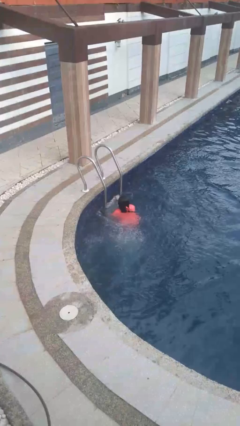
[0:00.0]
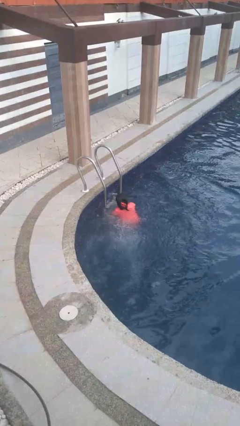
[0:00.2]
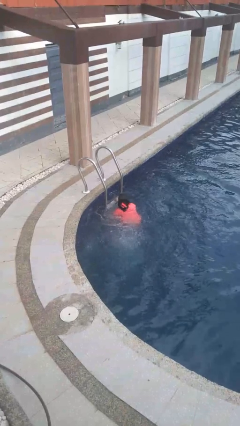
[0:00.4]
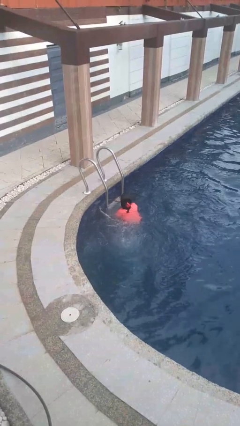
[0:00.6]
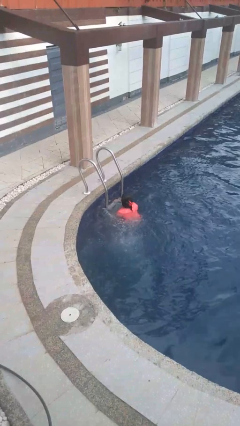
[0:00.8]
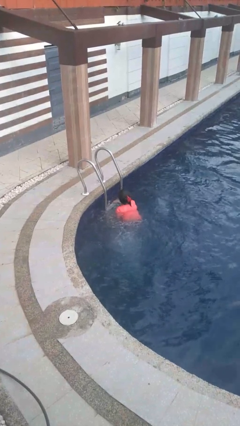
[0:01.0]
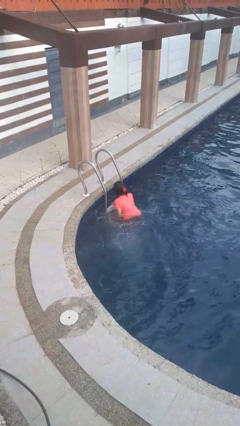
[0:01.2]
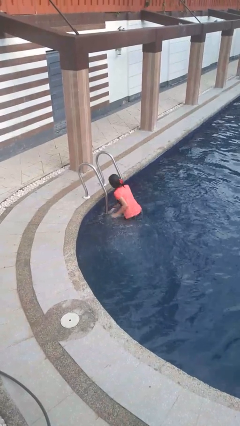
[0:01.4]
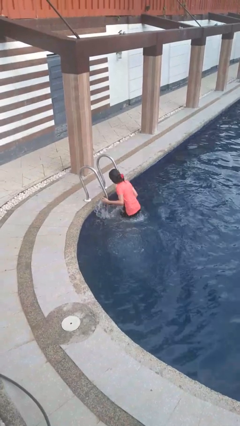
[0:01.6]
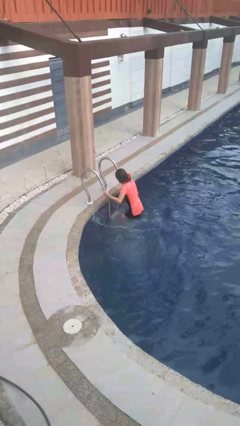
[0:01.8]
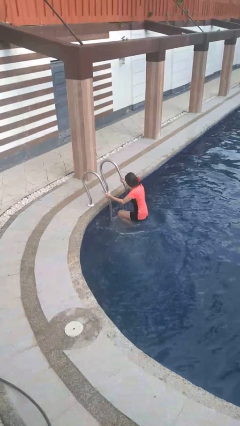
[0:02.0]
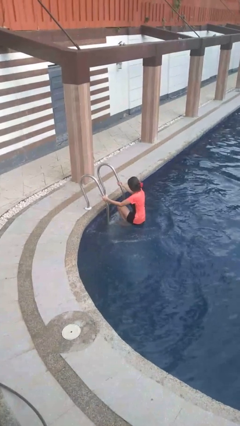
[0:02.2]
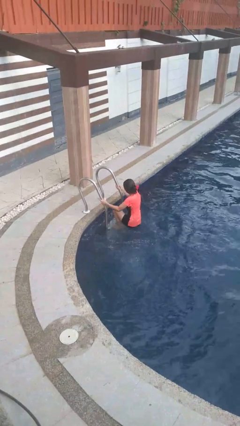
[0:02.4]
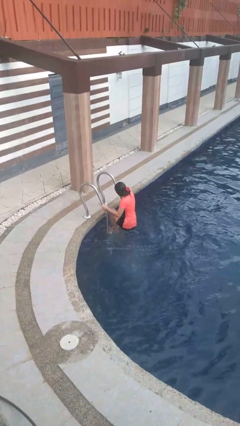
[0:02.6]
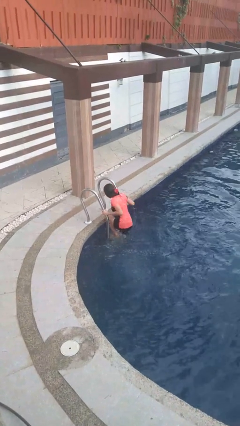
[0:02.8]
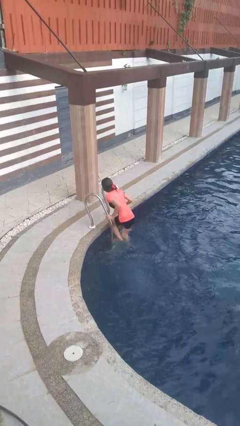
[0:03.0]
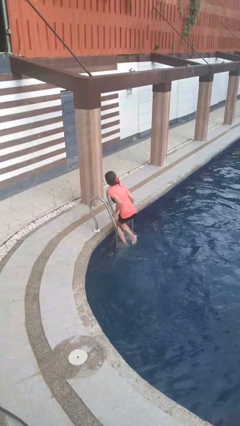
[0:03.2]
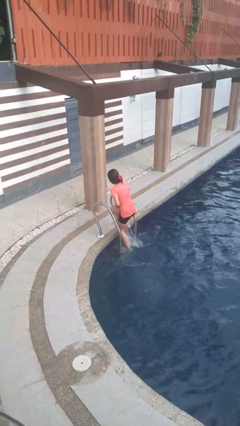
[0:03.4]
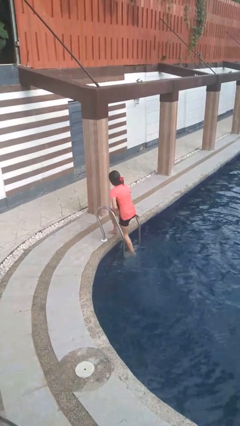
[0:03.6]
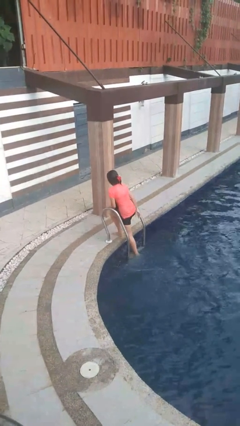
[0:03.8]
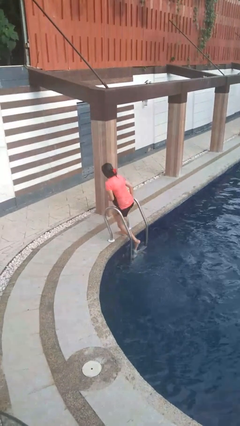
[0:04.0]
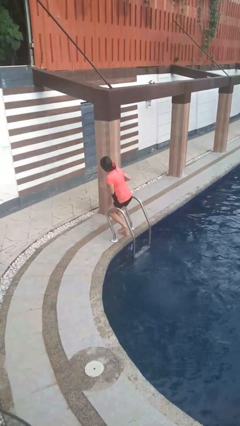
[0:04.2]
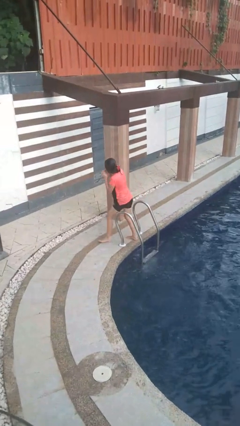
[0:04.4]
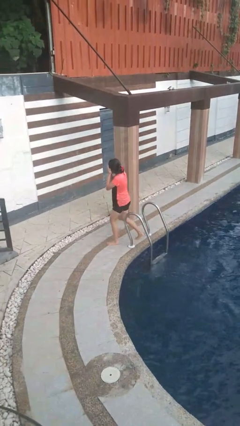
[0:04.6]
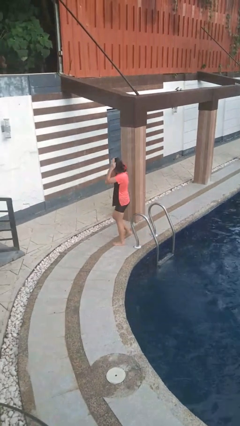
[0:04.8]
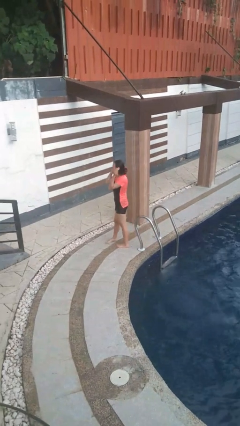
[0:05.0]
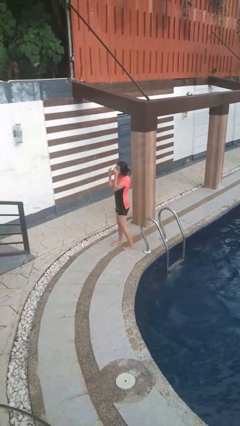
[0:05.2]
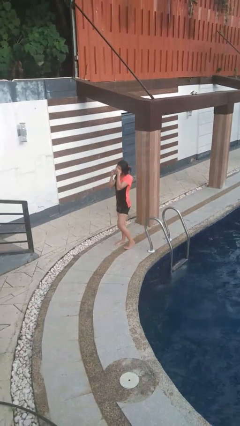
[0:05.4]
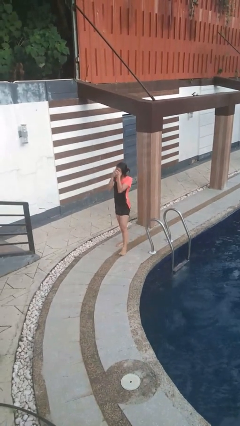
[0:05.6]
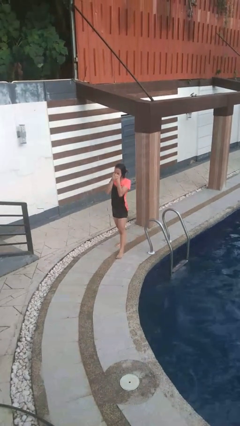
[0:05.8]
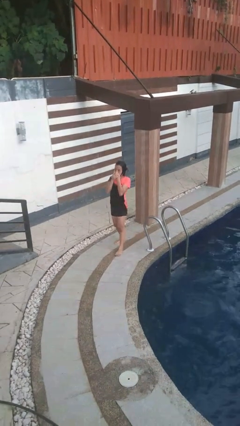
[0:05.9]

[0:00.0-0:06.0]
person exits pool

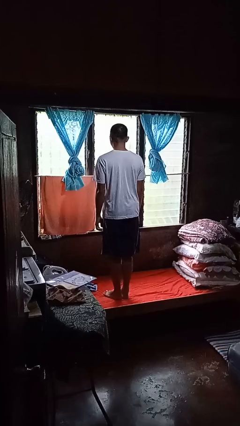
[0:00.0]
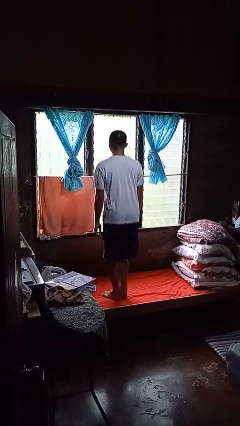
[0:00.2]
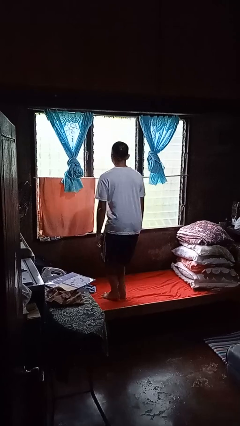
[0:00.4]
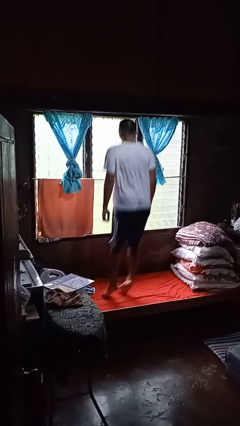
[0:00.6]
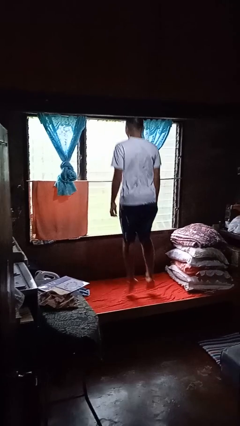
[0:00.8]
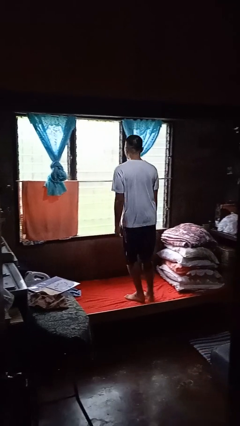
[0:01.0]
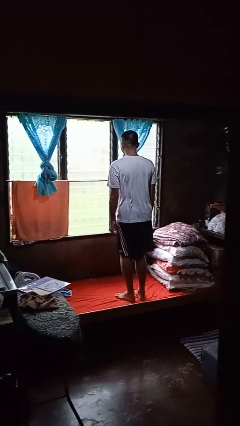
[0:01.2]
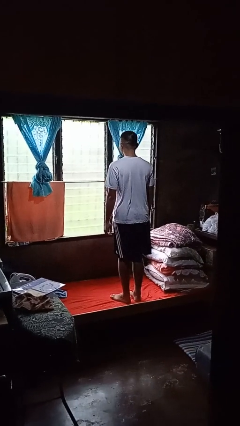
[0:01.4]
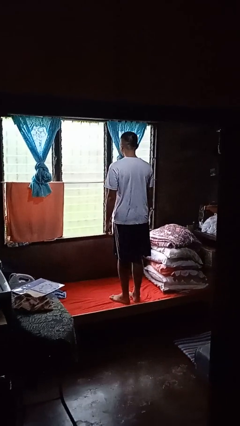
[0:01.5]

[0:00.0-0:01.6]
person jumps on bed

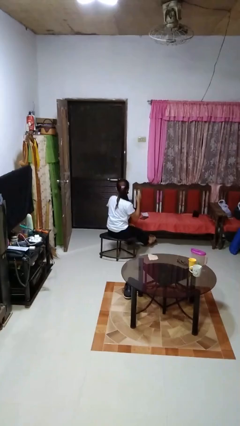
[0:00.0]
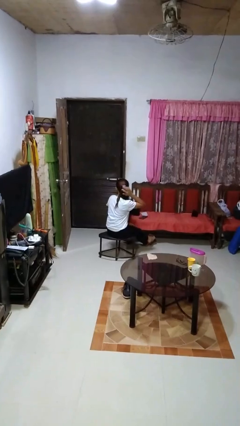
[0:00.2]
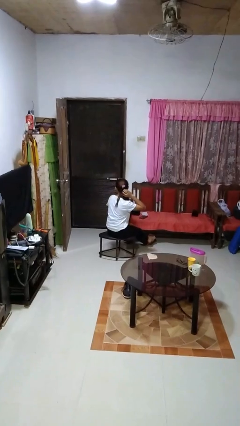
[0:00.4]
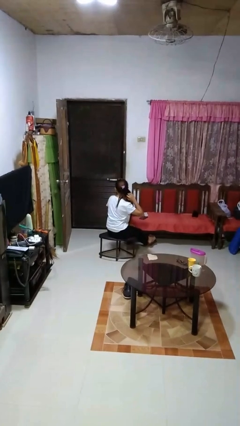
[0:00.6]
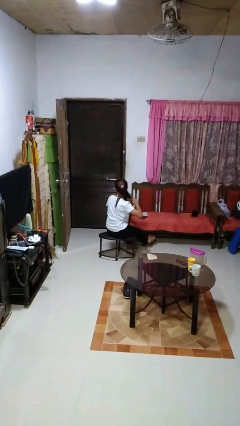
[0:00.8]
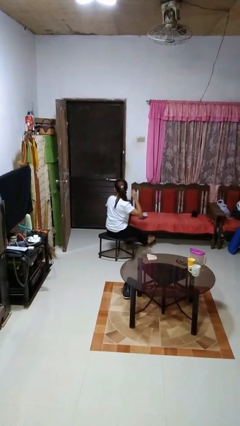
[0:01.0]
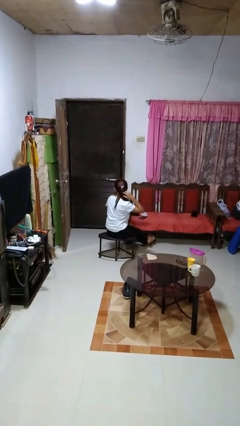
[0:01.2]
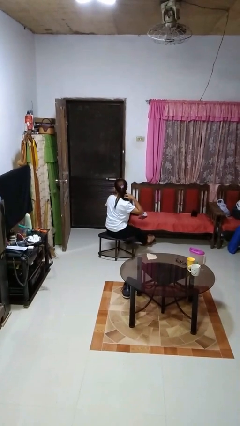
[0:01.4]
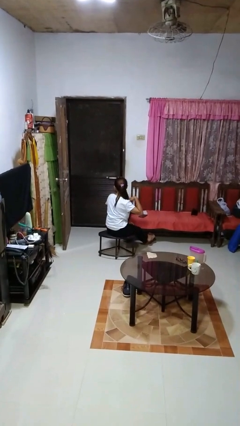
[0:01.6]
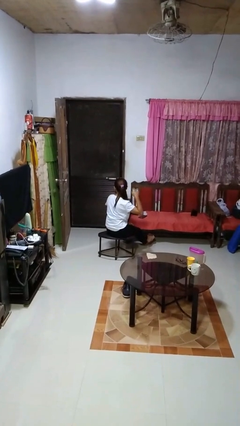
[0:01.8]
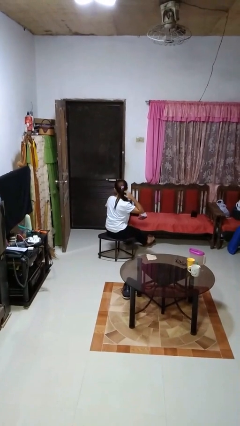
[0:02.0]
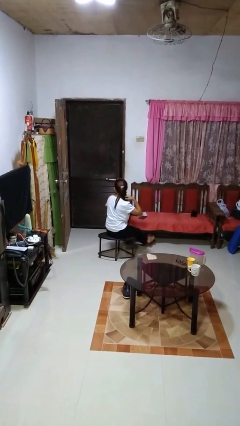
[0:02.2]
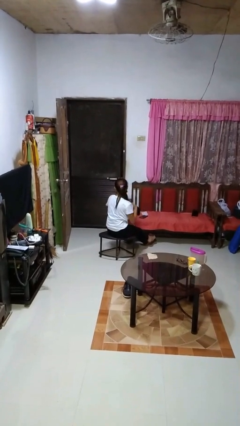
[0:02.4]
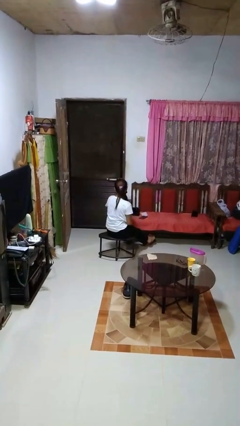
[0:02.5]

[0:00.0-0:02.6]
person strokes hair

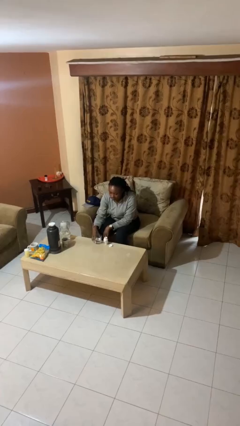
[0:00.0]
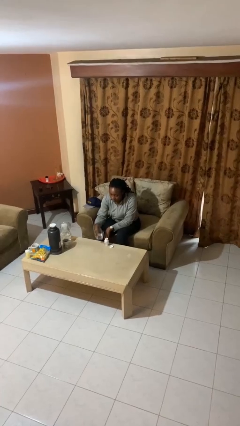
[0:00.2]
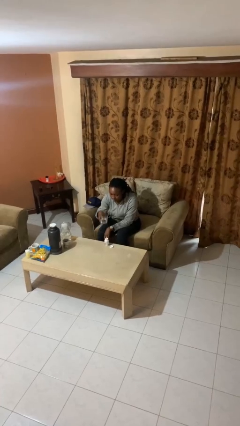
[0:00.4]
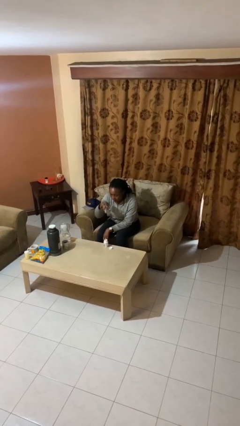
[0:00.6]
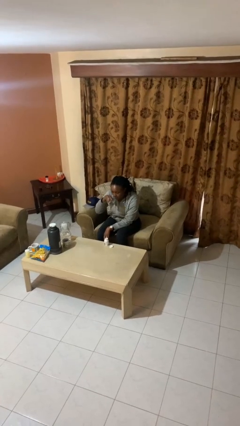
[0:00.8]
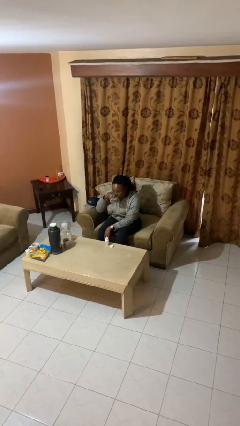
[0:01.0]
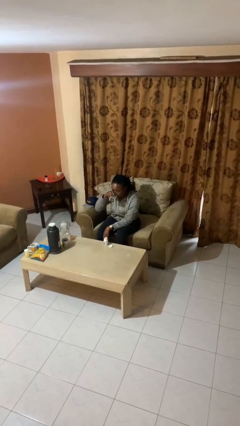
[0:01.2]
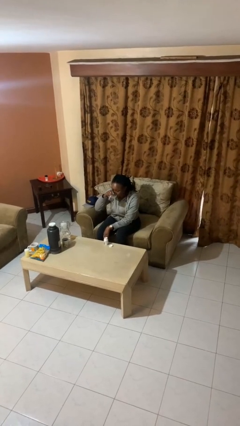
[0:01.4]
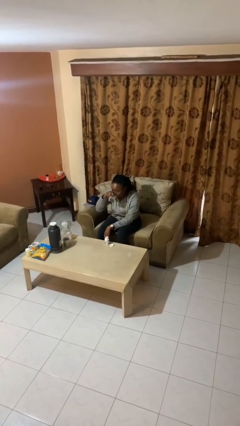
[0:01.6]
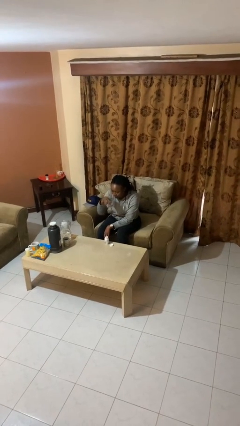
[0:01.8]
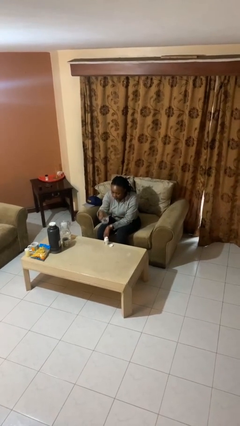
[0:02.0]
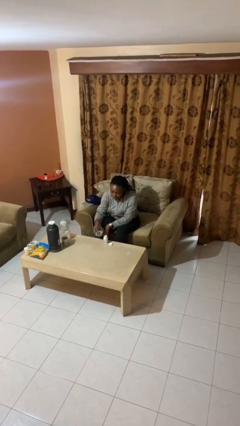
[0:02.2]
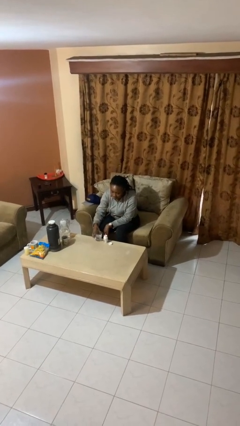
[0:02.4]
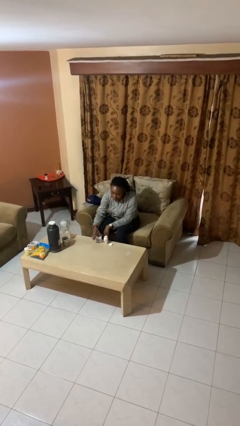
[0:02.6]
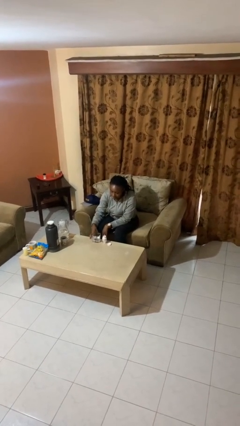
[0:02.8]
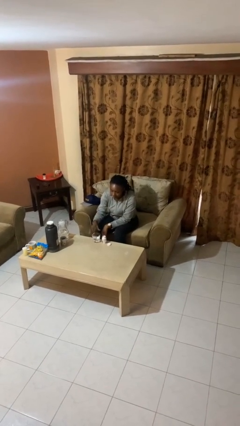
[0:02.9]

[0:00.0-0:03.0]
person drinks from cup

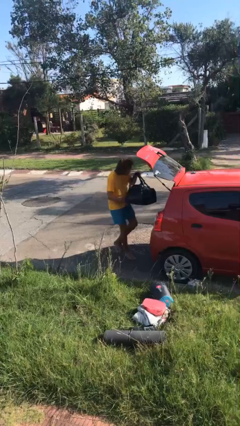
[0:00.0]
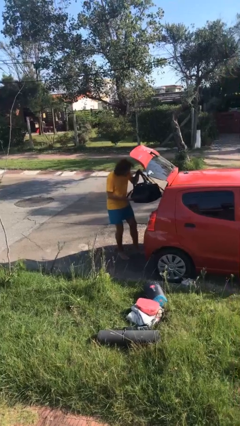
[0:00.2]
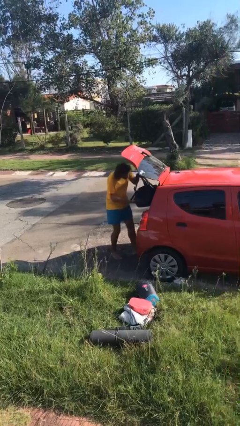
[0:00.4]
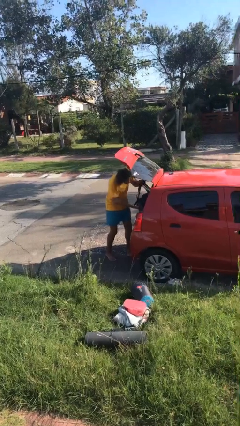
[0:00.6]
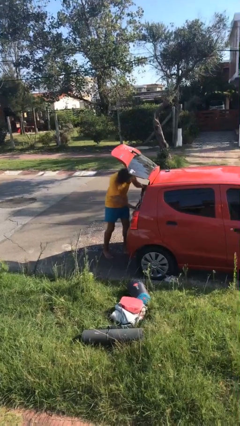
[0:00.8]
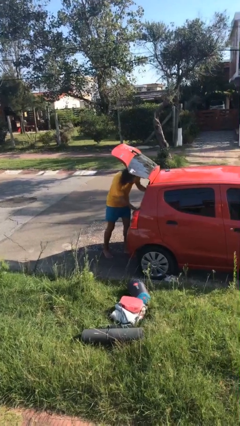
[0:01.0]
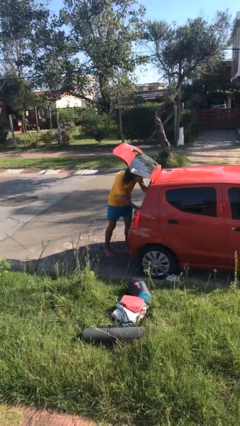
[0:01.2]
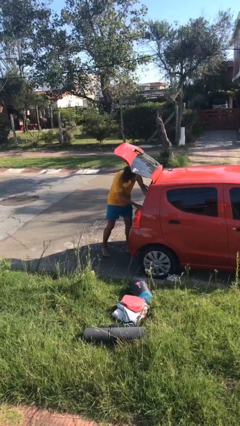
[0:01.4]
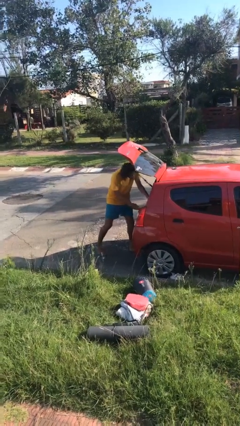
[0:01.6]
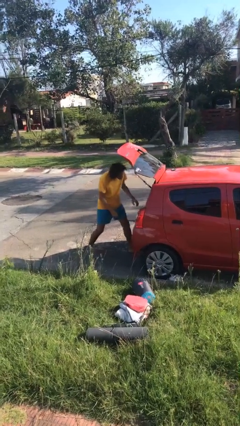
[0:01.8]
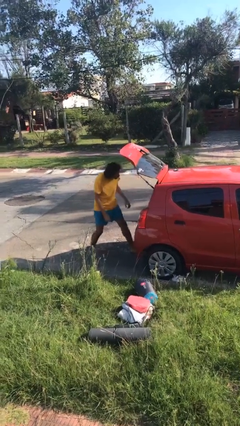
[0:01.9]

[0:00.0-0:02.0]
person loads car

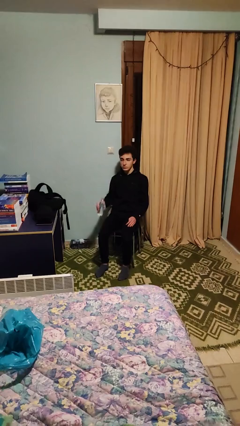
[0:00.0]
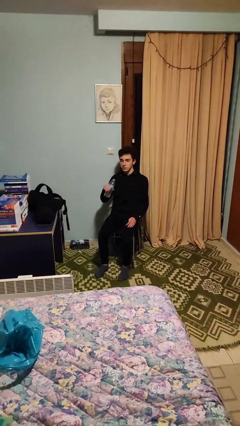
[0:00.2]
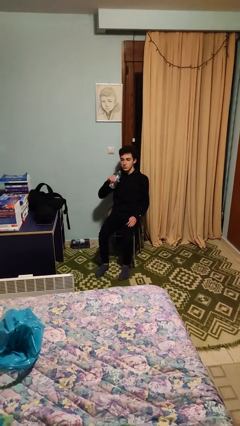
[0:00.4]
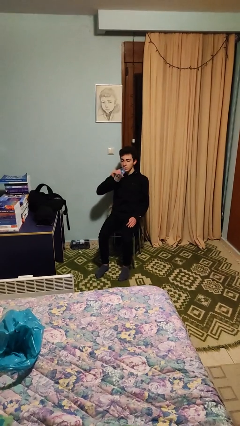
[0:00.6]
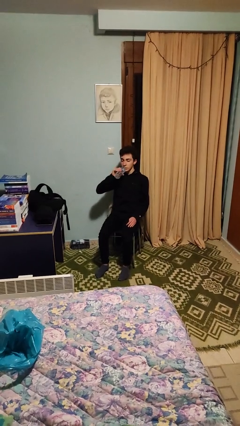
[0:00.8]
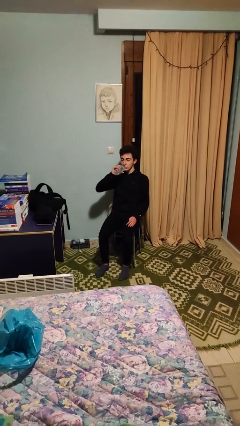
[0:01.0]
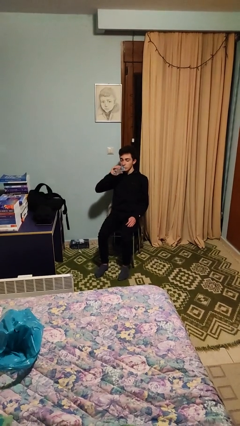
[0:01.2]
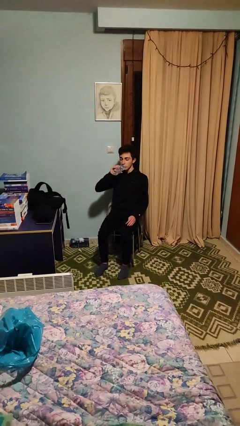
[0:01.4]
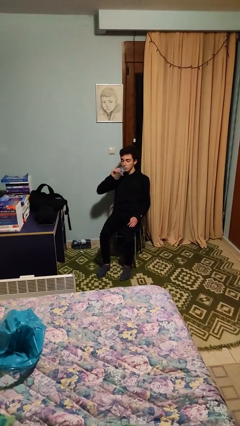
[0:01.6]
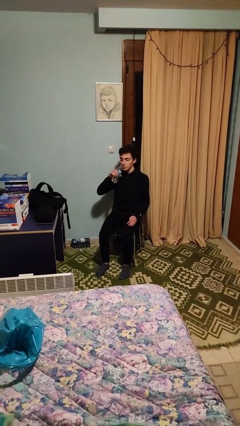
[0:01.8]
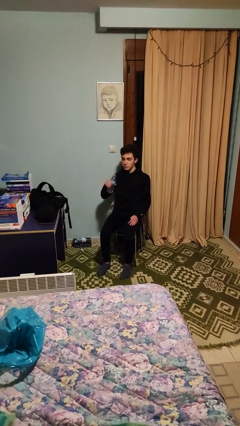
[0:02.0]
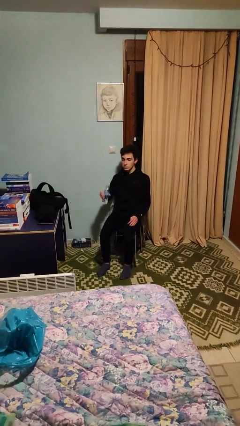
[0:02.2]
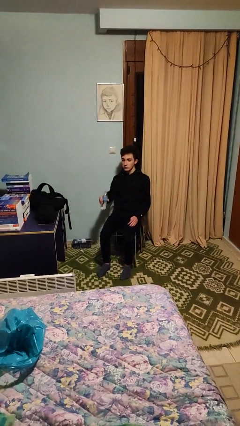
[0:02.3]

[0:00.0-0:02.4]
person drinks from bottle
